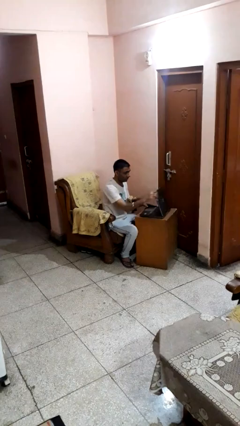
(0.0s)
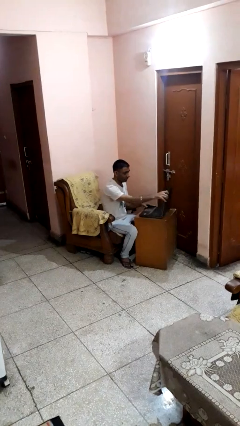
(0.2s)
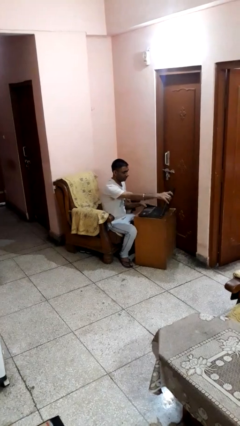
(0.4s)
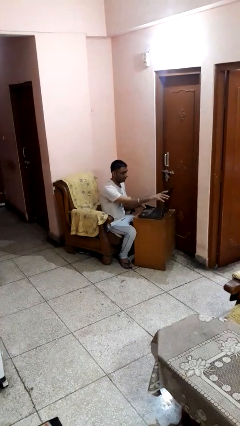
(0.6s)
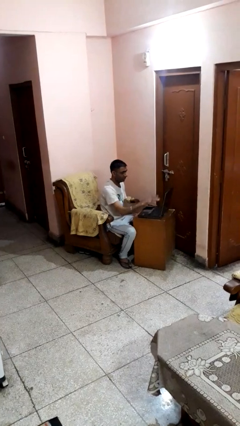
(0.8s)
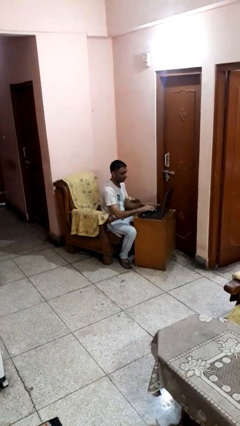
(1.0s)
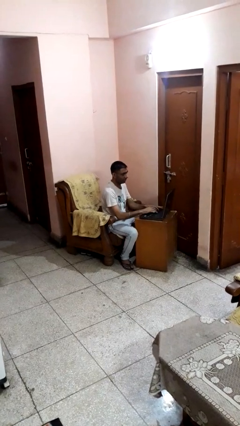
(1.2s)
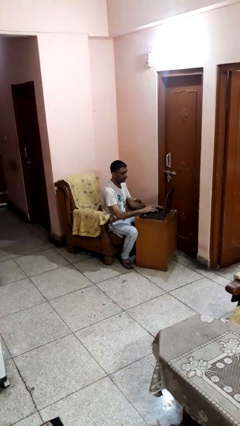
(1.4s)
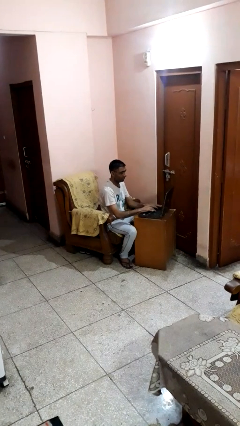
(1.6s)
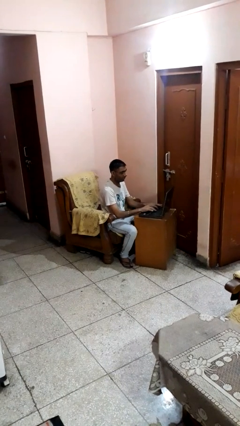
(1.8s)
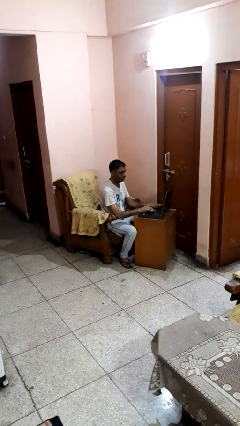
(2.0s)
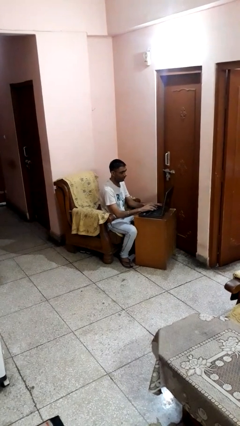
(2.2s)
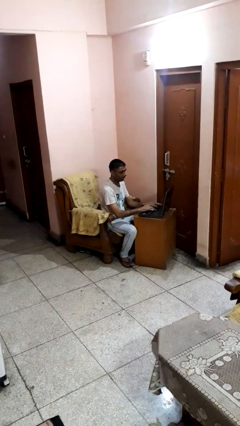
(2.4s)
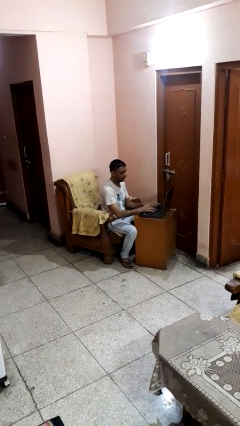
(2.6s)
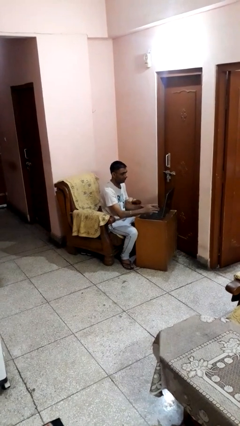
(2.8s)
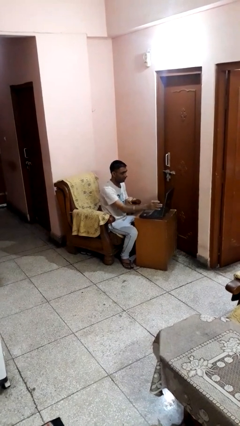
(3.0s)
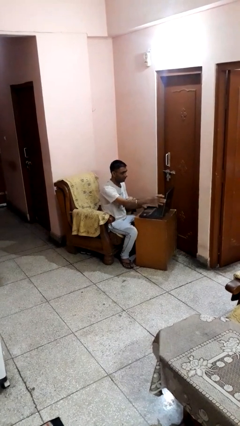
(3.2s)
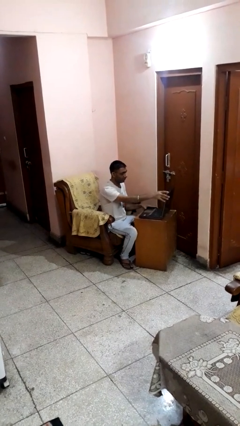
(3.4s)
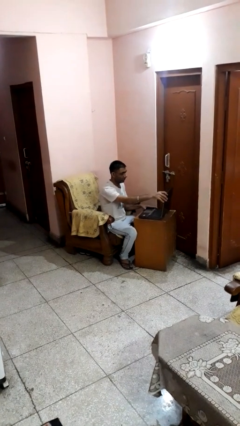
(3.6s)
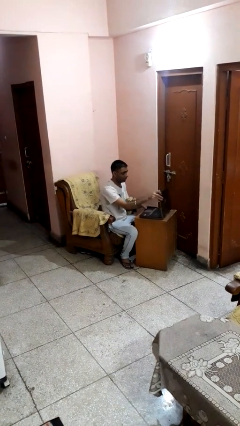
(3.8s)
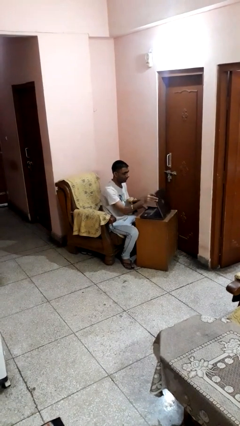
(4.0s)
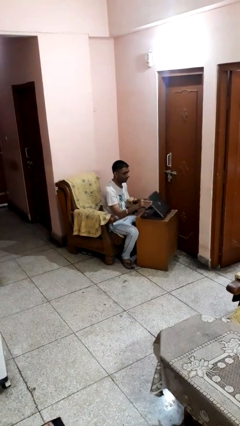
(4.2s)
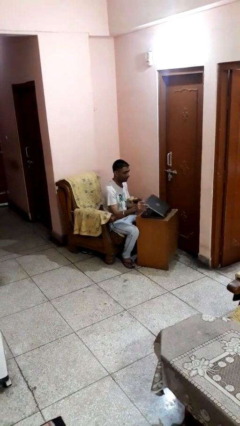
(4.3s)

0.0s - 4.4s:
person interacts with laptop

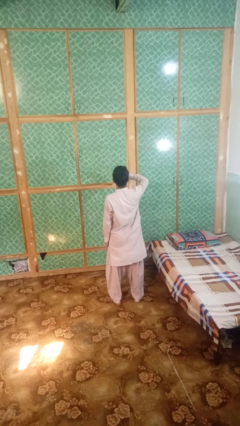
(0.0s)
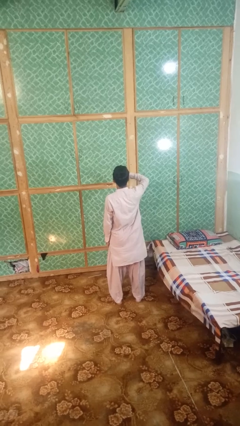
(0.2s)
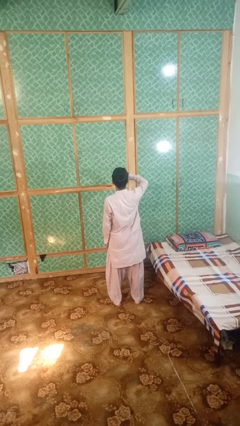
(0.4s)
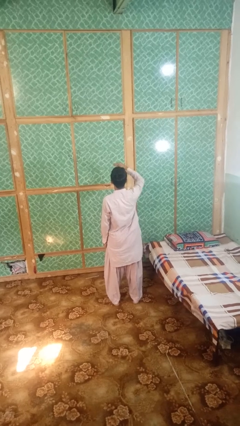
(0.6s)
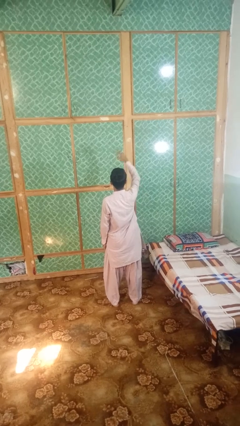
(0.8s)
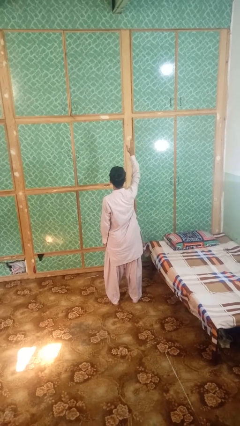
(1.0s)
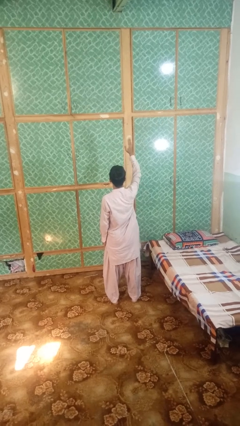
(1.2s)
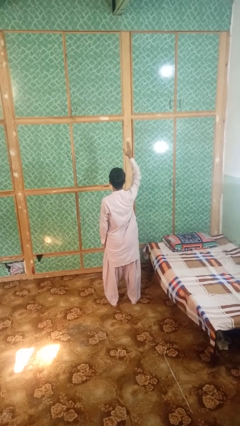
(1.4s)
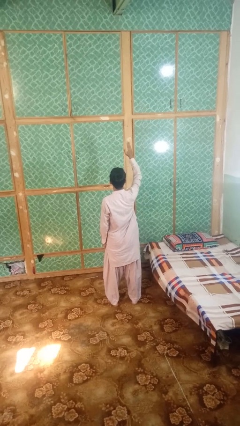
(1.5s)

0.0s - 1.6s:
person gestures swipe up

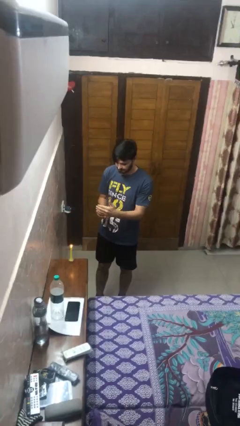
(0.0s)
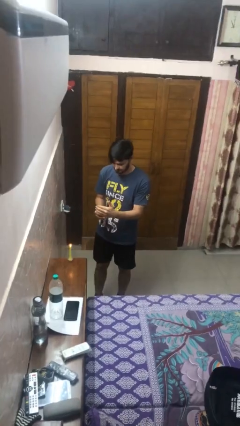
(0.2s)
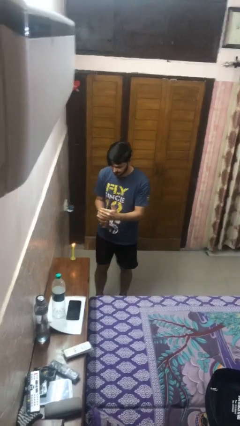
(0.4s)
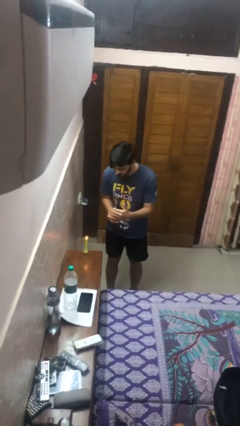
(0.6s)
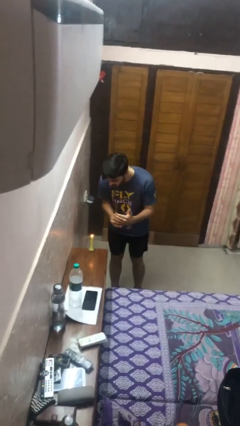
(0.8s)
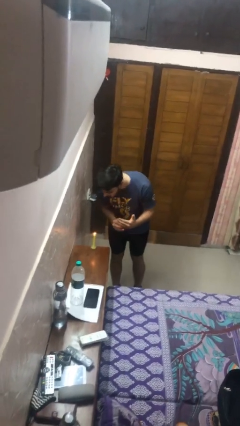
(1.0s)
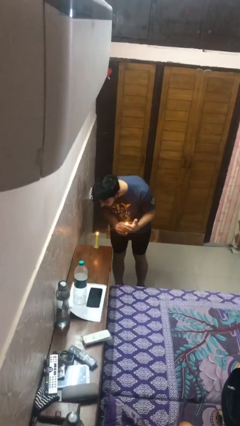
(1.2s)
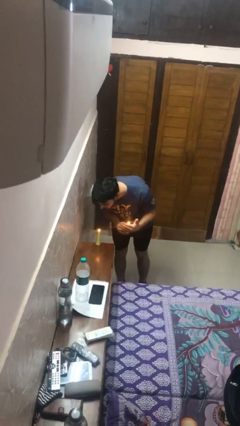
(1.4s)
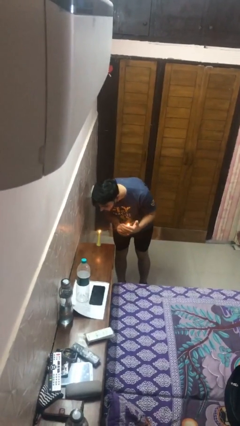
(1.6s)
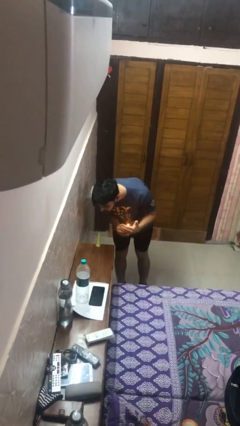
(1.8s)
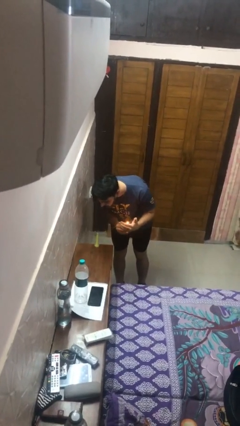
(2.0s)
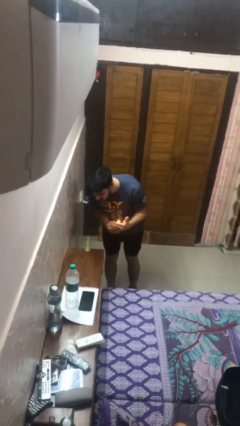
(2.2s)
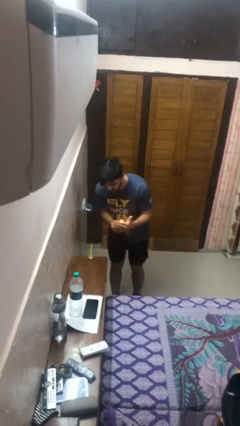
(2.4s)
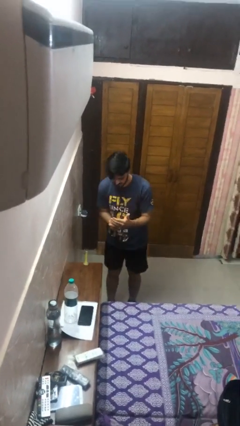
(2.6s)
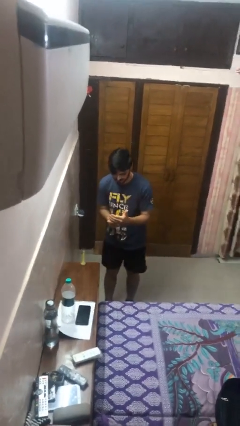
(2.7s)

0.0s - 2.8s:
person extinguishes candle

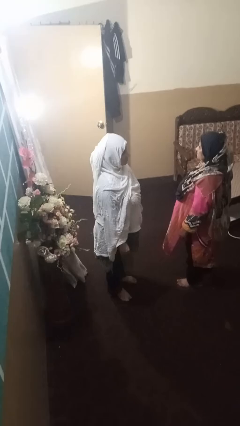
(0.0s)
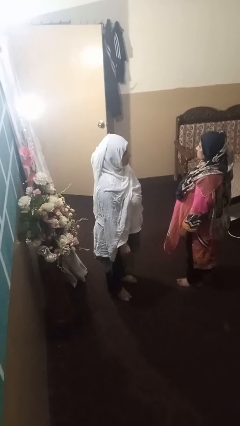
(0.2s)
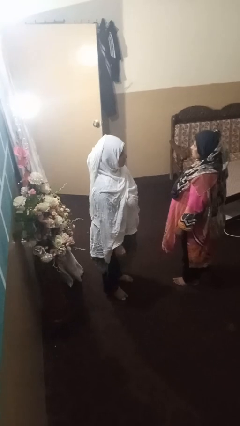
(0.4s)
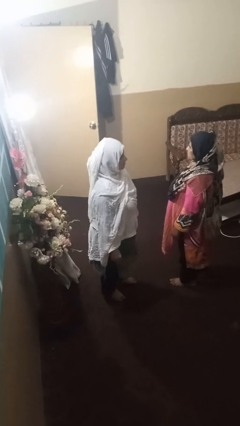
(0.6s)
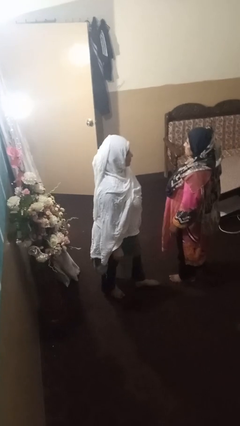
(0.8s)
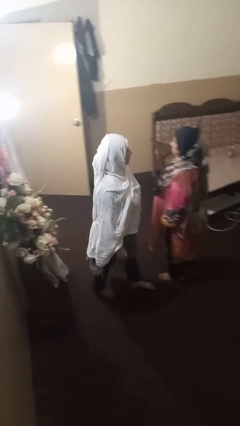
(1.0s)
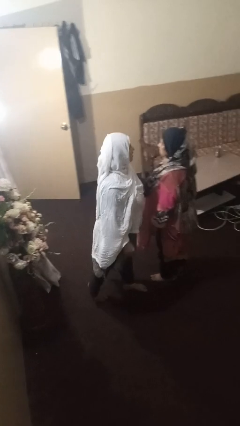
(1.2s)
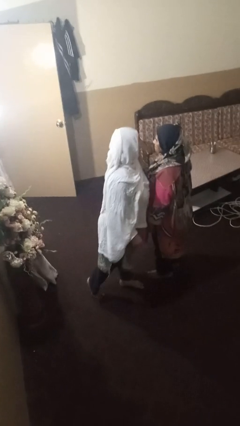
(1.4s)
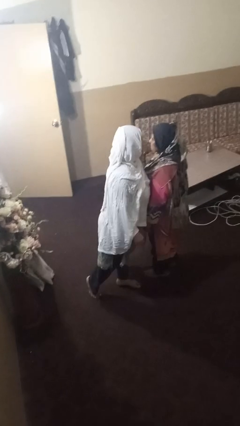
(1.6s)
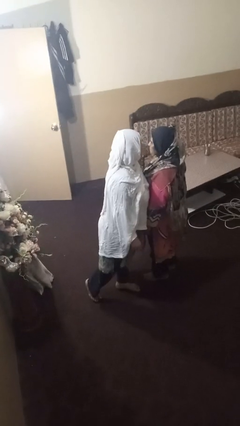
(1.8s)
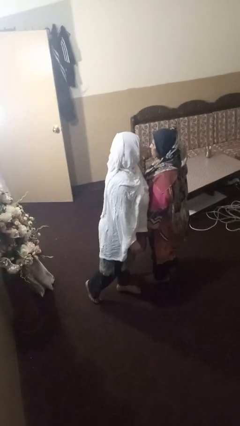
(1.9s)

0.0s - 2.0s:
person laughs with person

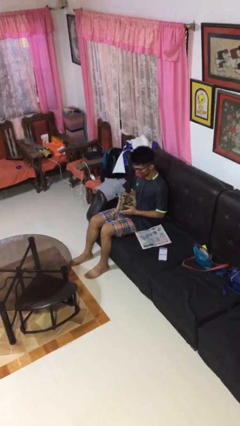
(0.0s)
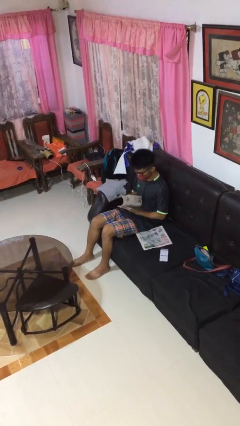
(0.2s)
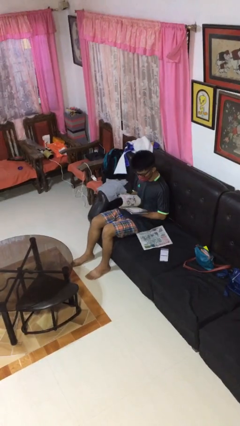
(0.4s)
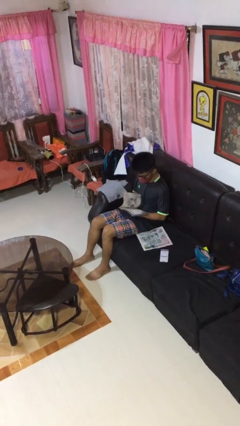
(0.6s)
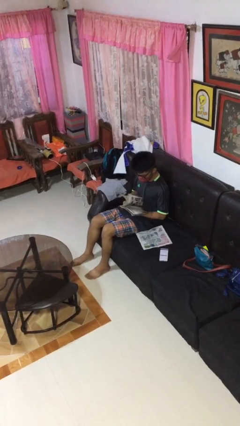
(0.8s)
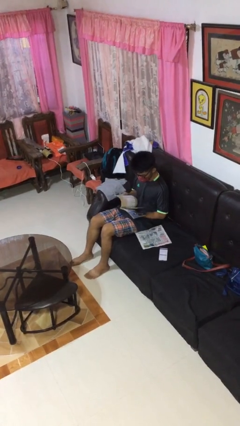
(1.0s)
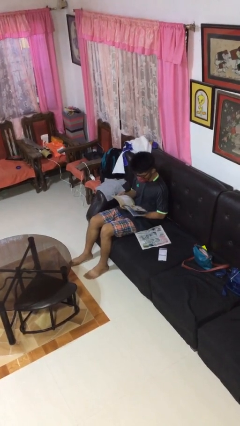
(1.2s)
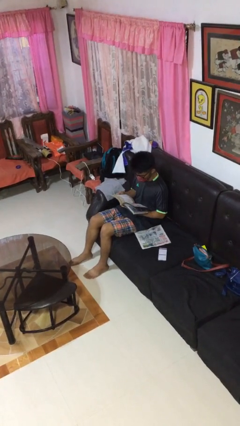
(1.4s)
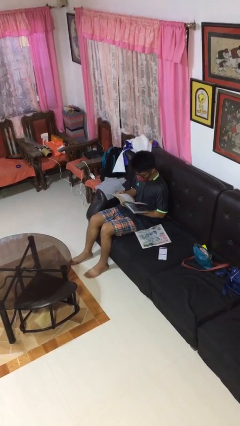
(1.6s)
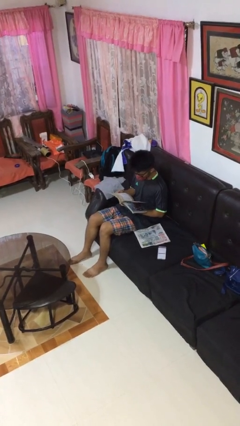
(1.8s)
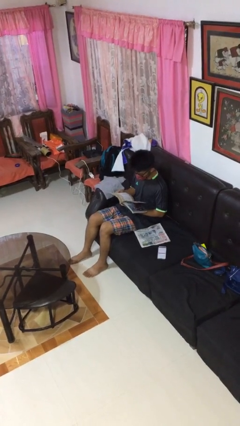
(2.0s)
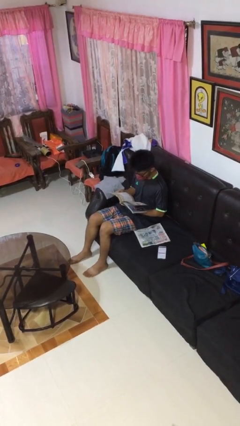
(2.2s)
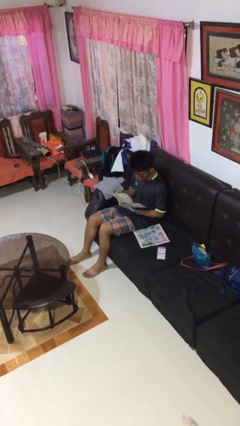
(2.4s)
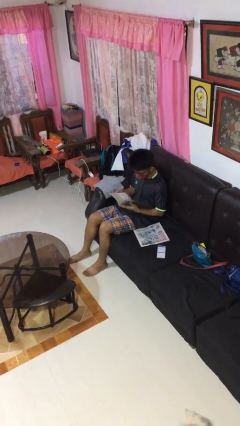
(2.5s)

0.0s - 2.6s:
person reads magazine

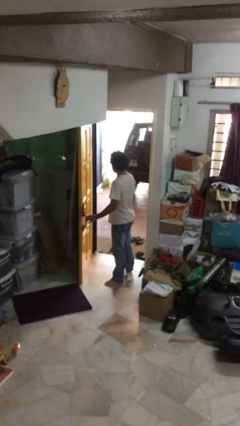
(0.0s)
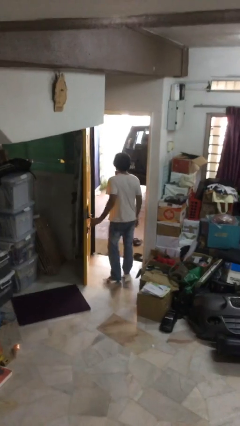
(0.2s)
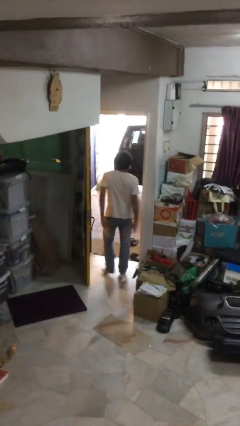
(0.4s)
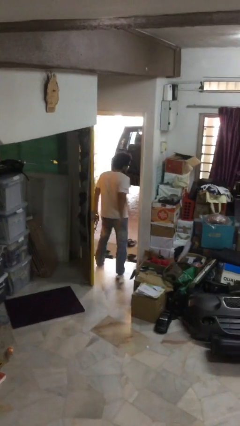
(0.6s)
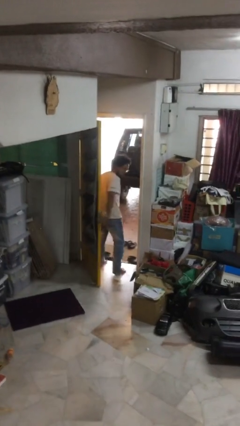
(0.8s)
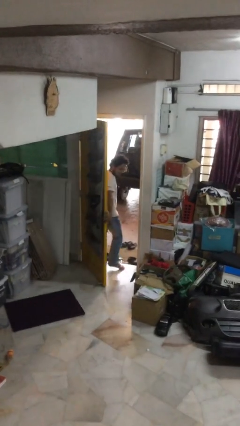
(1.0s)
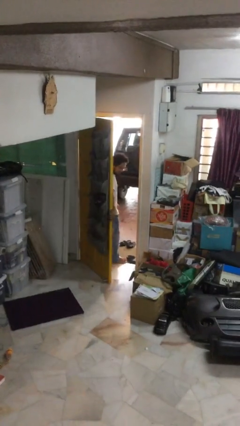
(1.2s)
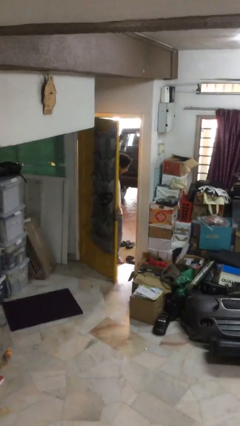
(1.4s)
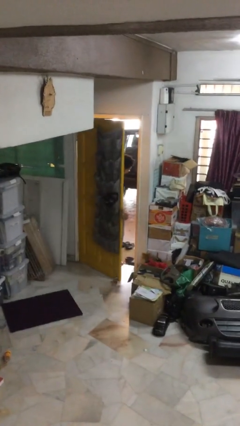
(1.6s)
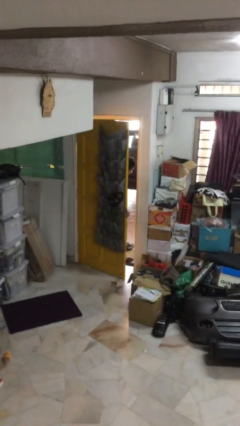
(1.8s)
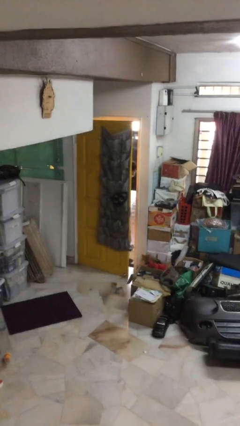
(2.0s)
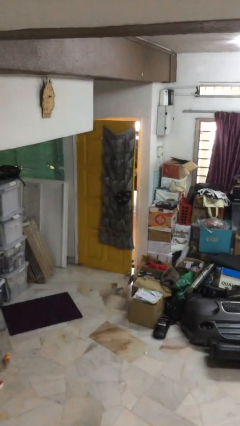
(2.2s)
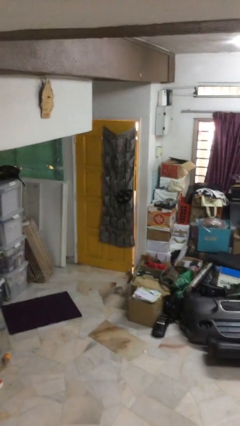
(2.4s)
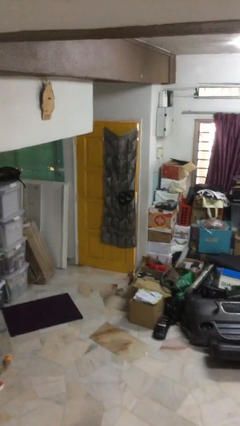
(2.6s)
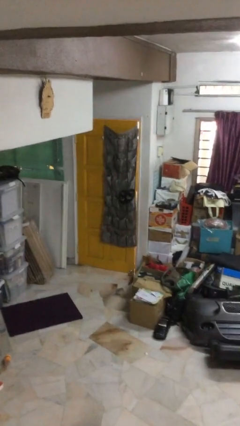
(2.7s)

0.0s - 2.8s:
person closes facility door

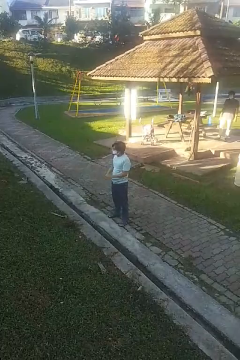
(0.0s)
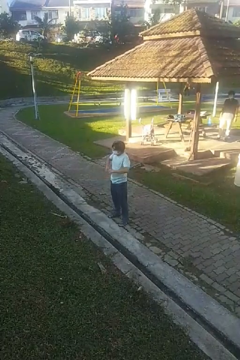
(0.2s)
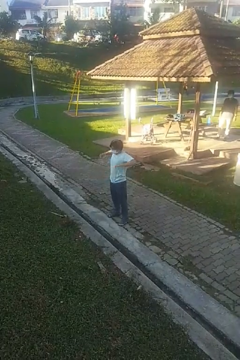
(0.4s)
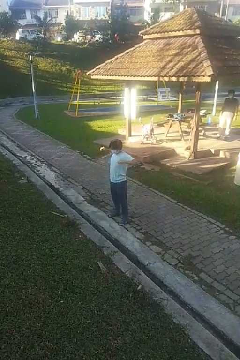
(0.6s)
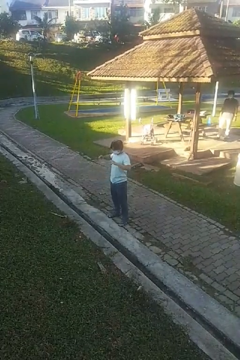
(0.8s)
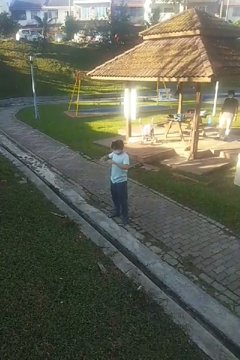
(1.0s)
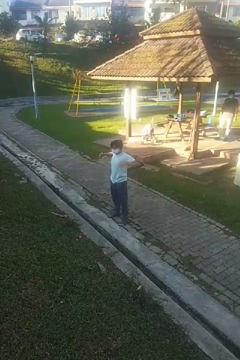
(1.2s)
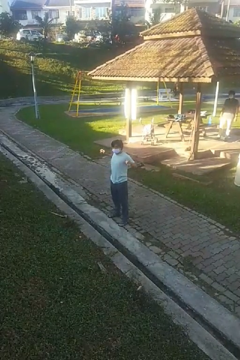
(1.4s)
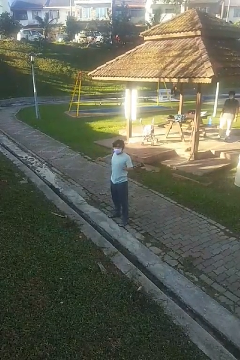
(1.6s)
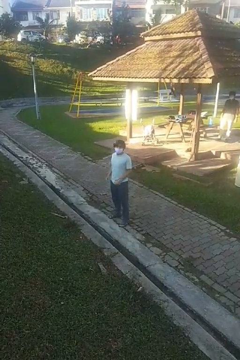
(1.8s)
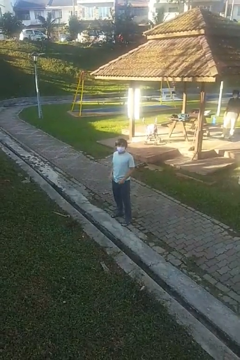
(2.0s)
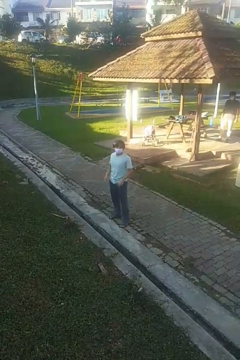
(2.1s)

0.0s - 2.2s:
person stretches arms to side
